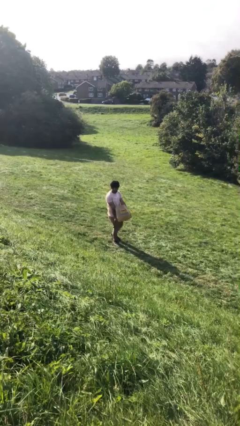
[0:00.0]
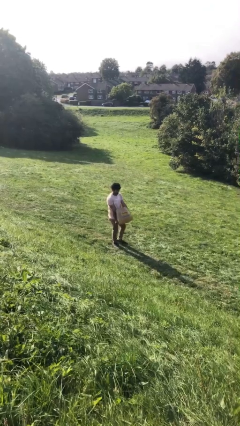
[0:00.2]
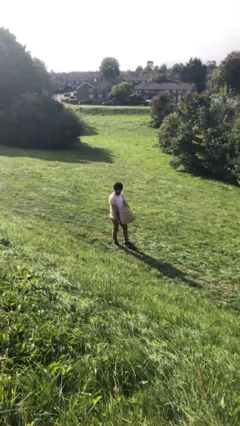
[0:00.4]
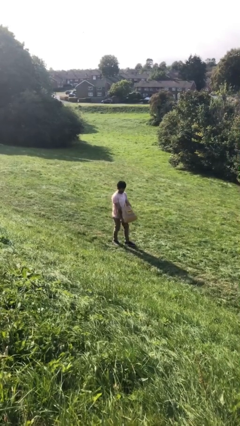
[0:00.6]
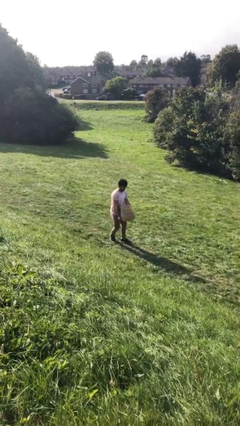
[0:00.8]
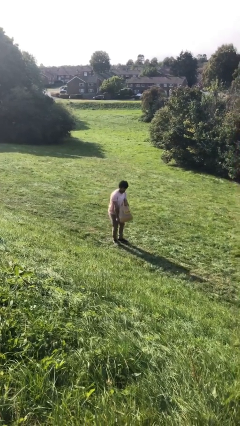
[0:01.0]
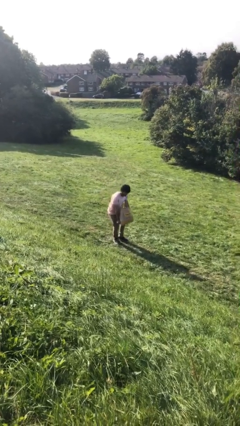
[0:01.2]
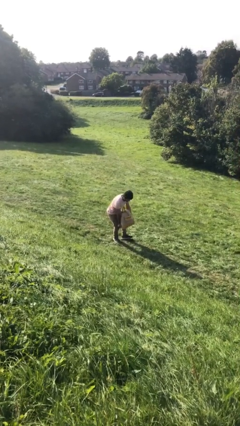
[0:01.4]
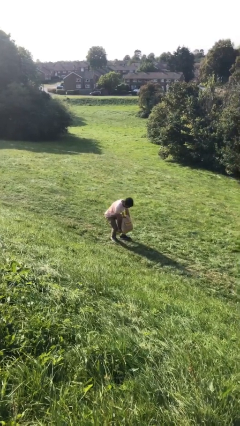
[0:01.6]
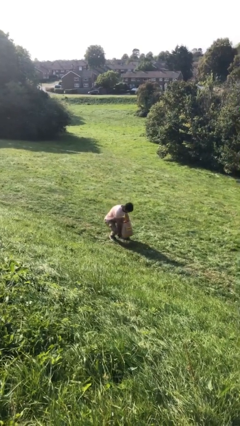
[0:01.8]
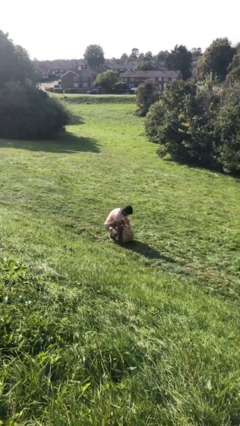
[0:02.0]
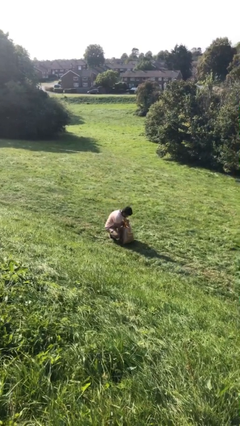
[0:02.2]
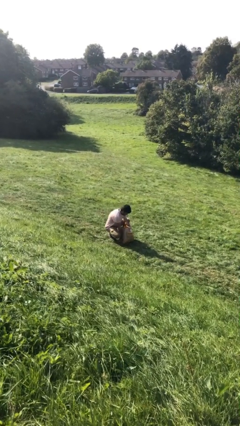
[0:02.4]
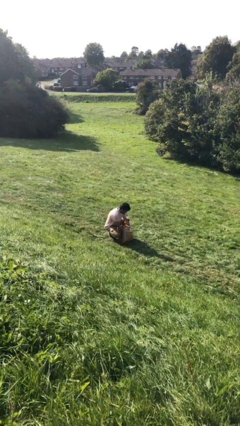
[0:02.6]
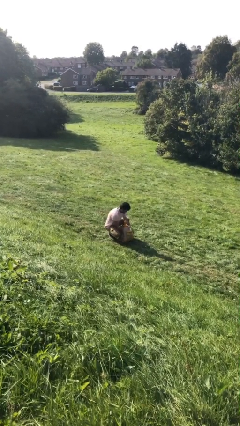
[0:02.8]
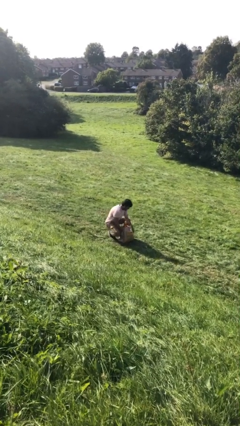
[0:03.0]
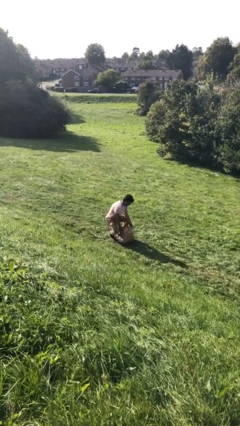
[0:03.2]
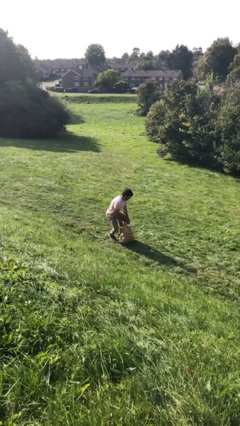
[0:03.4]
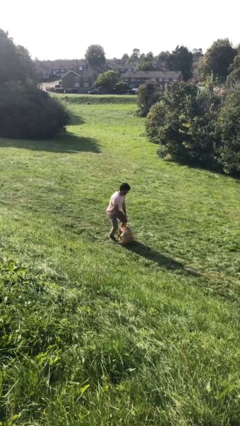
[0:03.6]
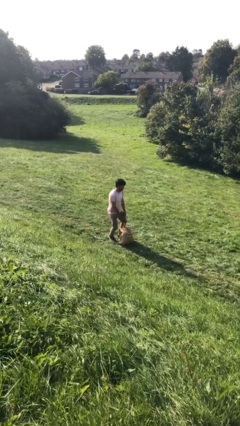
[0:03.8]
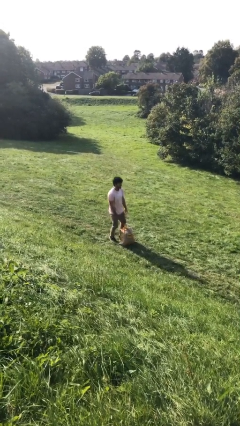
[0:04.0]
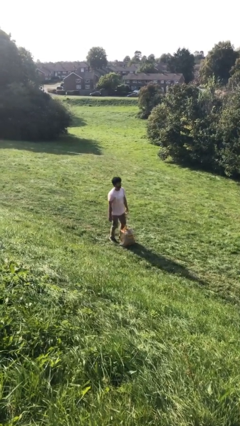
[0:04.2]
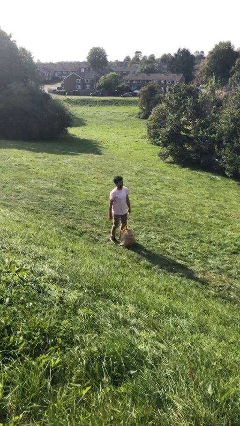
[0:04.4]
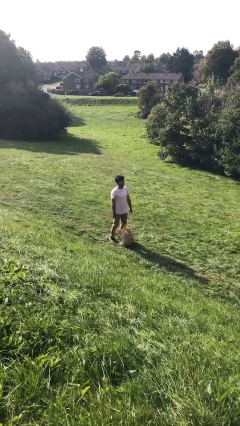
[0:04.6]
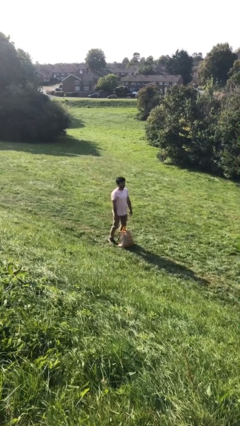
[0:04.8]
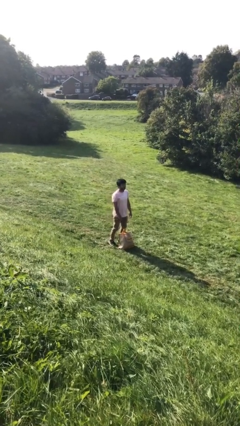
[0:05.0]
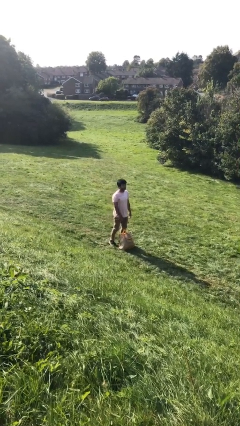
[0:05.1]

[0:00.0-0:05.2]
person puts down object on floor

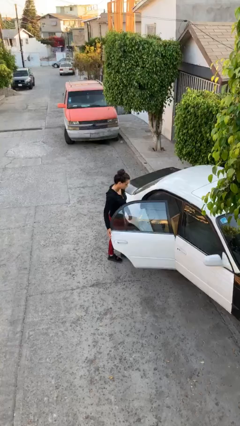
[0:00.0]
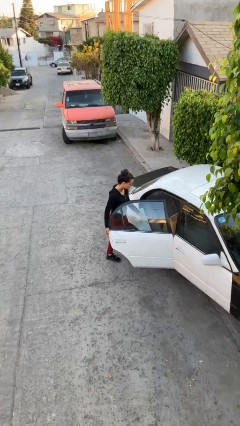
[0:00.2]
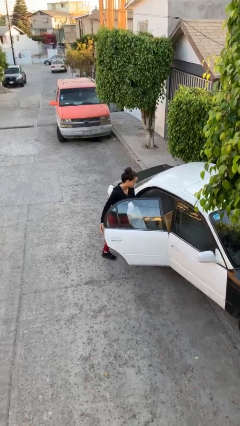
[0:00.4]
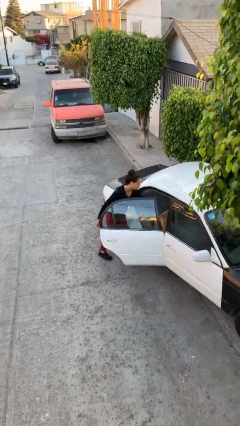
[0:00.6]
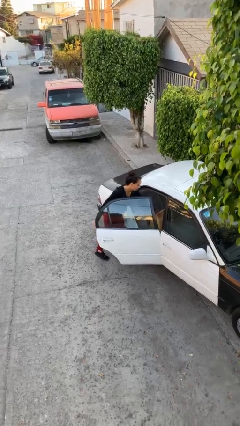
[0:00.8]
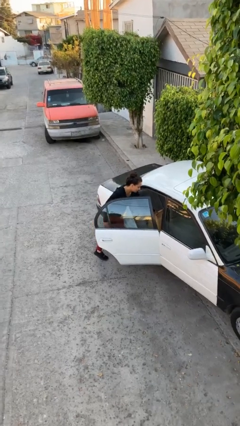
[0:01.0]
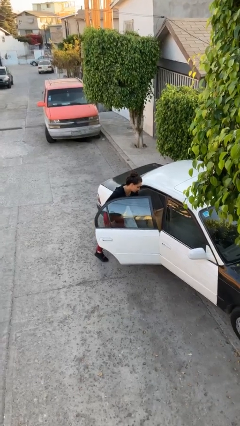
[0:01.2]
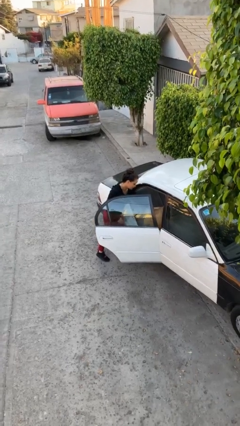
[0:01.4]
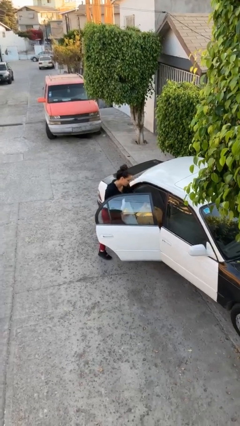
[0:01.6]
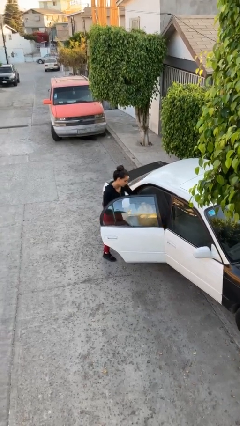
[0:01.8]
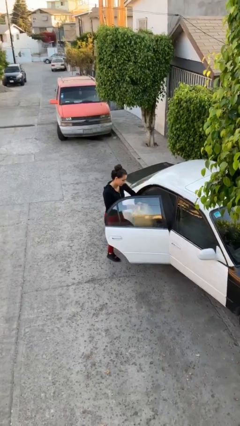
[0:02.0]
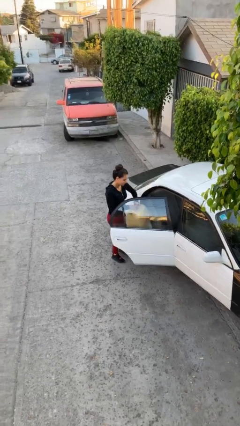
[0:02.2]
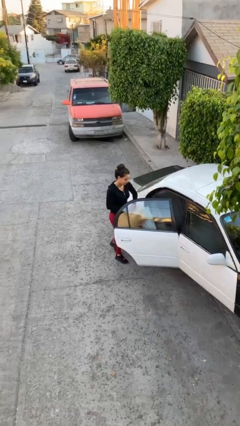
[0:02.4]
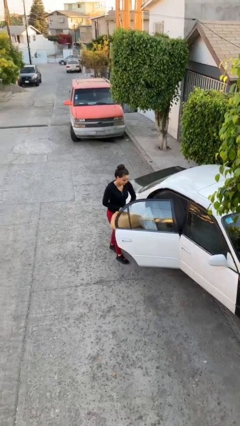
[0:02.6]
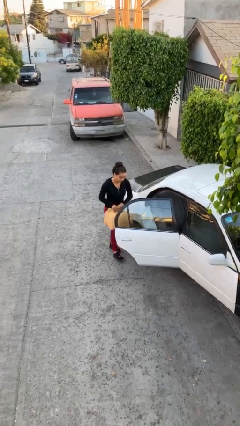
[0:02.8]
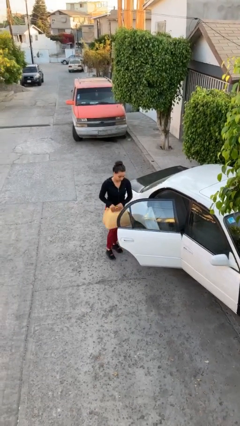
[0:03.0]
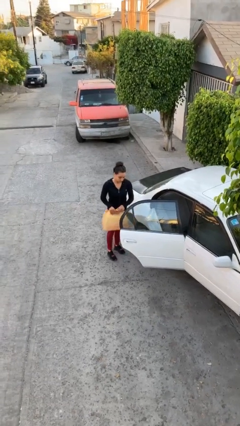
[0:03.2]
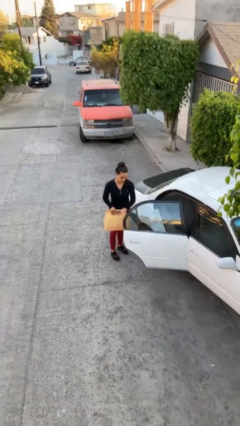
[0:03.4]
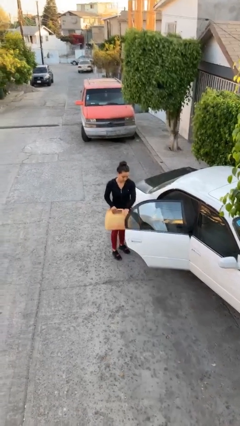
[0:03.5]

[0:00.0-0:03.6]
person unloads car

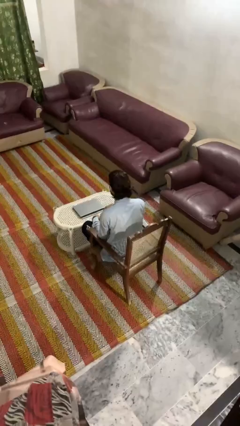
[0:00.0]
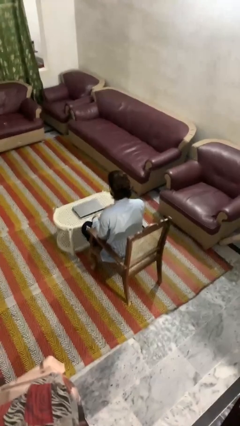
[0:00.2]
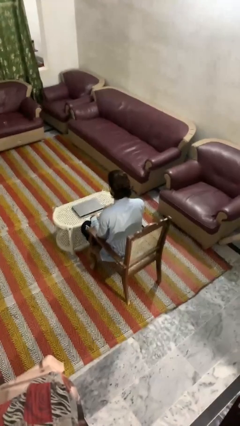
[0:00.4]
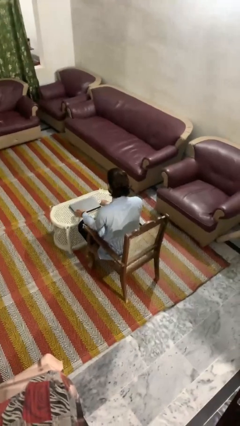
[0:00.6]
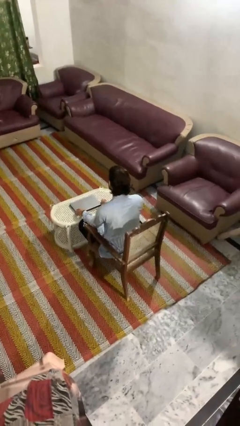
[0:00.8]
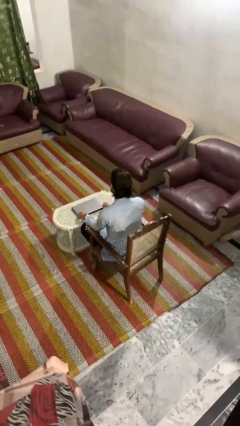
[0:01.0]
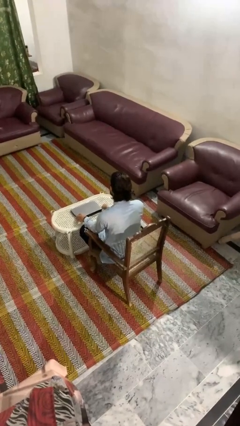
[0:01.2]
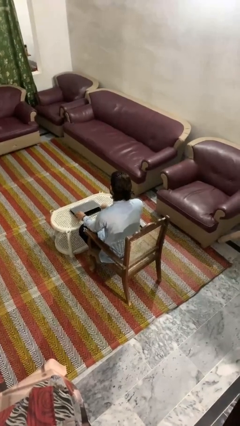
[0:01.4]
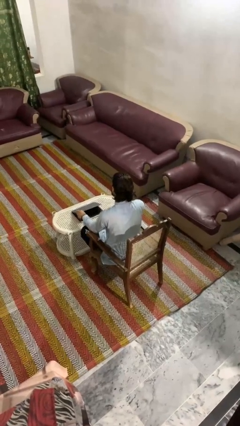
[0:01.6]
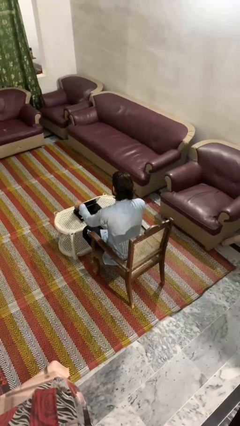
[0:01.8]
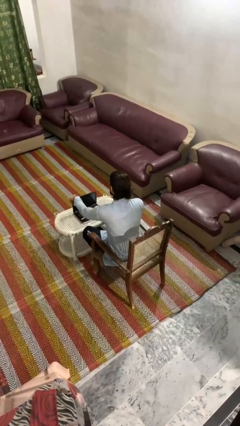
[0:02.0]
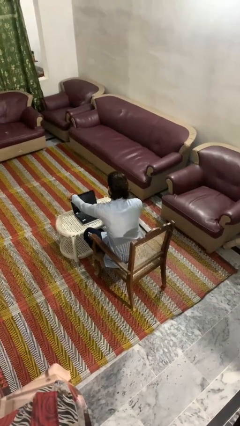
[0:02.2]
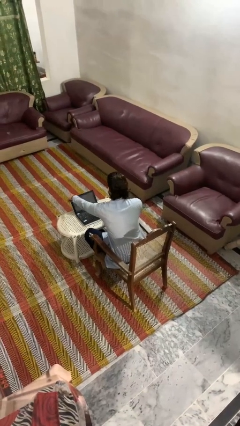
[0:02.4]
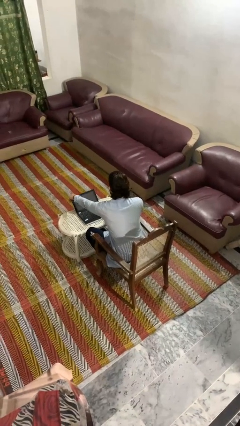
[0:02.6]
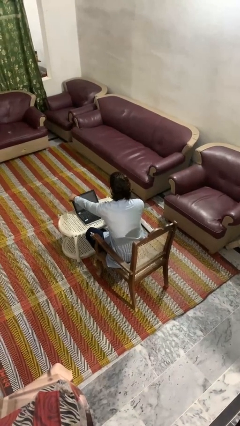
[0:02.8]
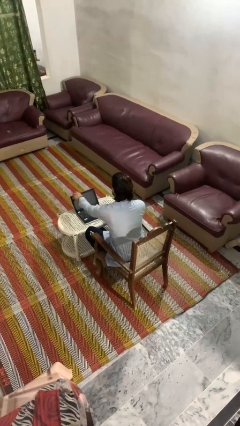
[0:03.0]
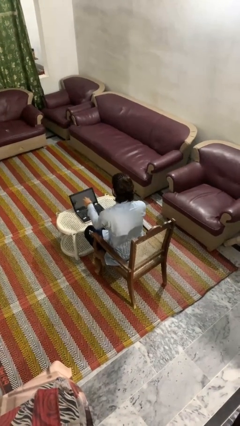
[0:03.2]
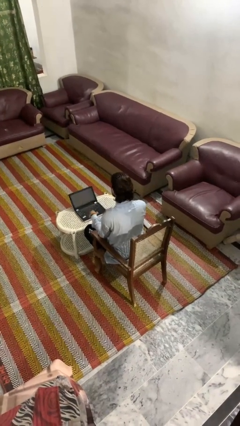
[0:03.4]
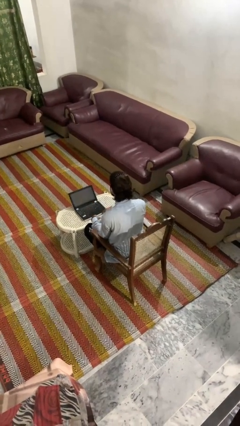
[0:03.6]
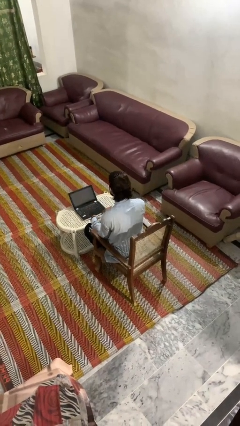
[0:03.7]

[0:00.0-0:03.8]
person opens laptop

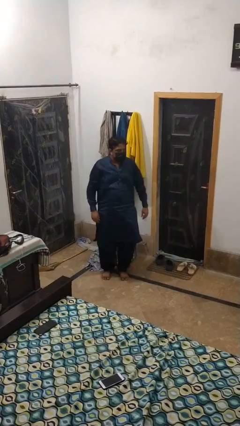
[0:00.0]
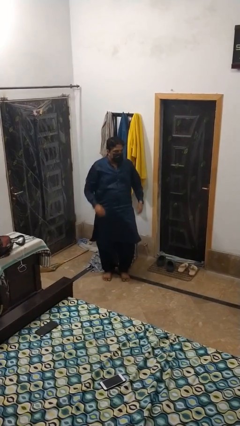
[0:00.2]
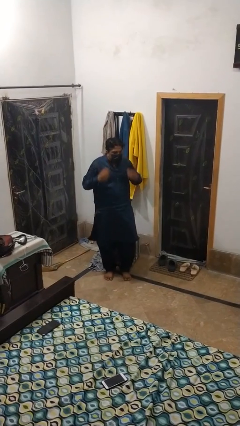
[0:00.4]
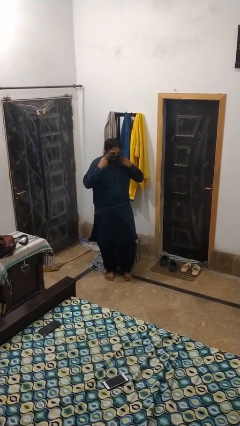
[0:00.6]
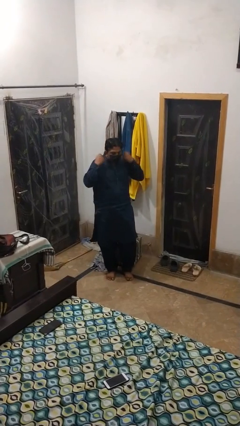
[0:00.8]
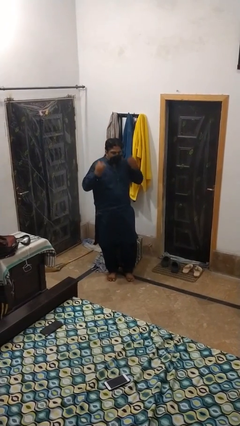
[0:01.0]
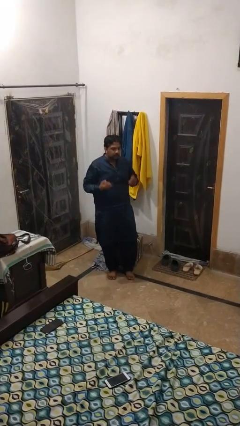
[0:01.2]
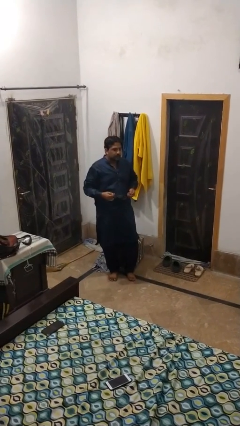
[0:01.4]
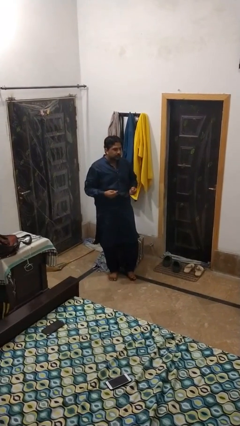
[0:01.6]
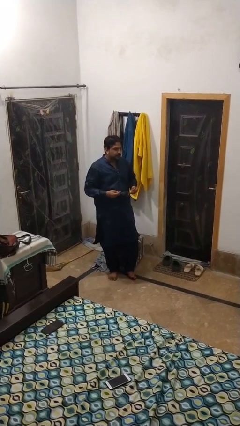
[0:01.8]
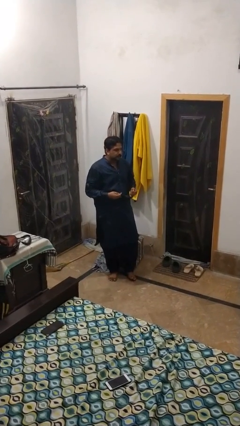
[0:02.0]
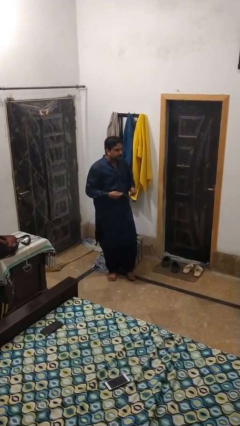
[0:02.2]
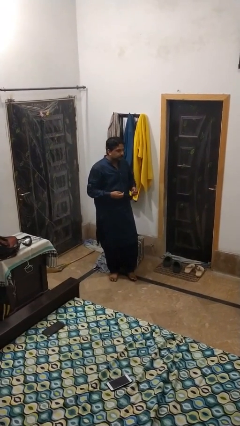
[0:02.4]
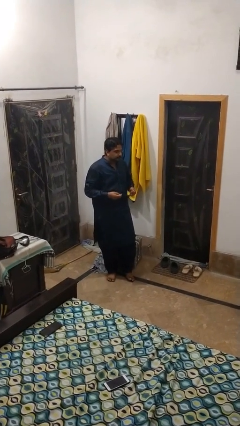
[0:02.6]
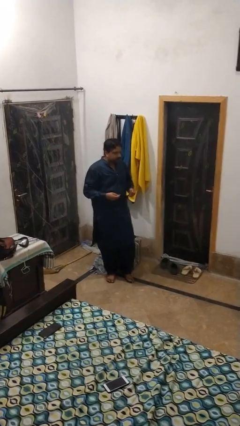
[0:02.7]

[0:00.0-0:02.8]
person takes off facemask

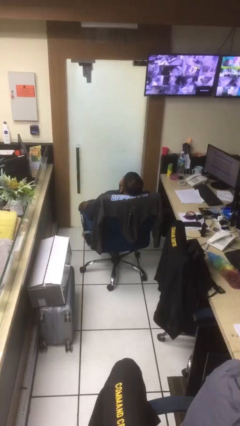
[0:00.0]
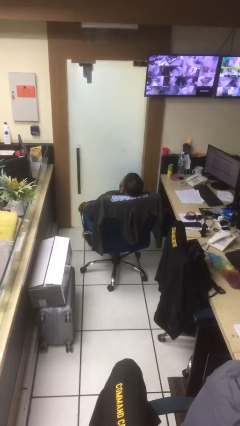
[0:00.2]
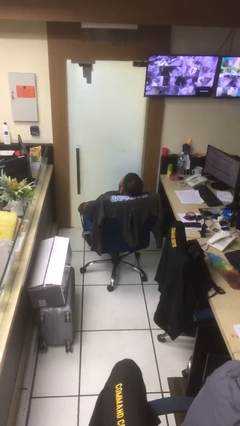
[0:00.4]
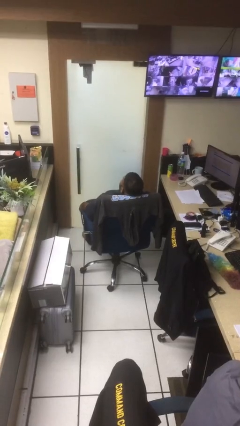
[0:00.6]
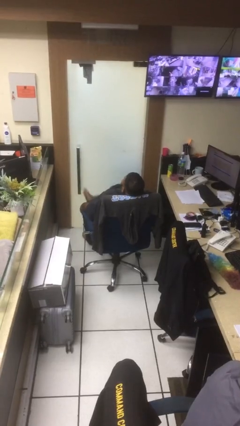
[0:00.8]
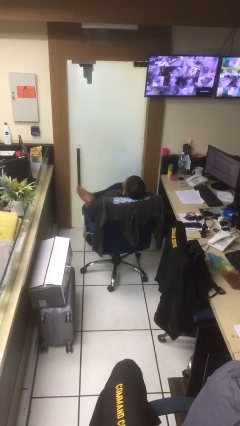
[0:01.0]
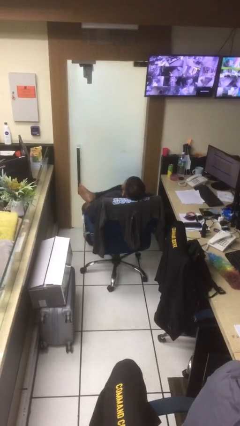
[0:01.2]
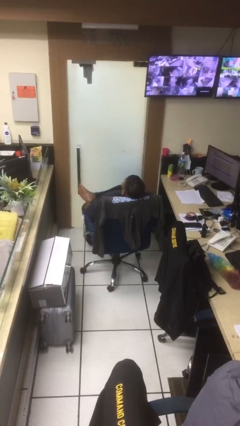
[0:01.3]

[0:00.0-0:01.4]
person crosses legs

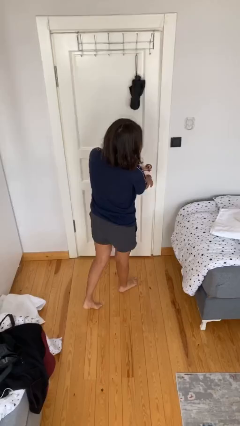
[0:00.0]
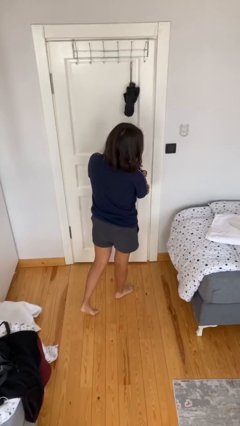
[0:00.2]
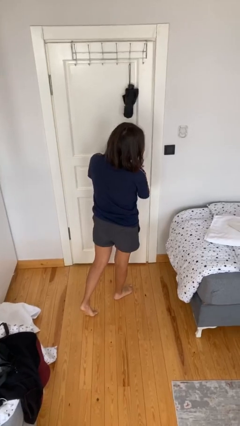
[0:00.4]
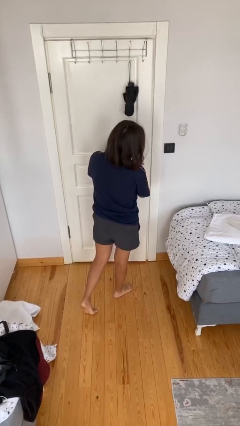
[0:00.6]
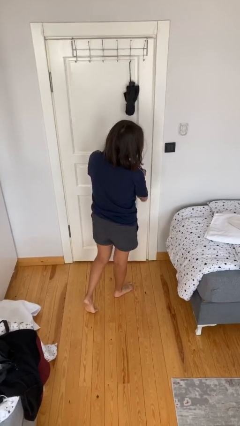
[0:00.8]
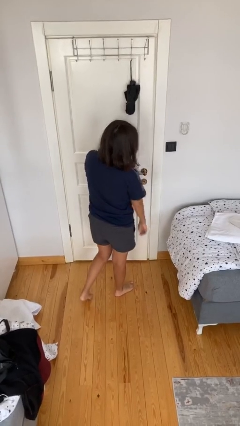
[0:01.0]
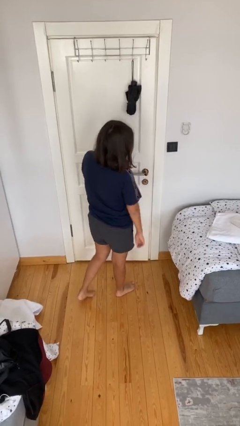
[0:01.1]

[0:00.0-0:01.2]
person locks door with keys
